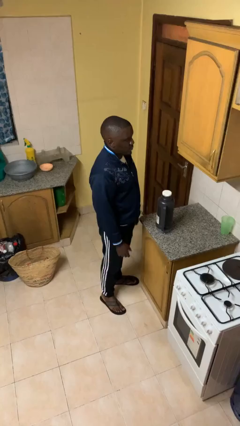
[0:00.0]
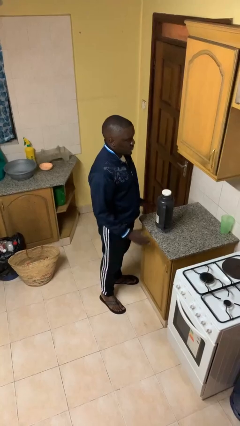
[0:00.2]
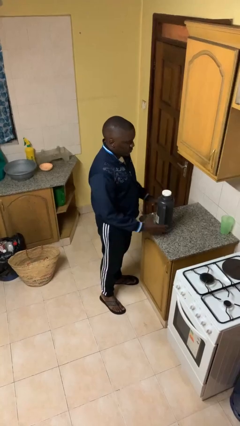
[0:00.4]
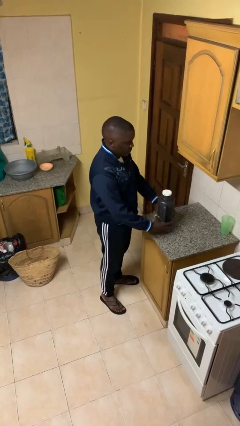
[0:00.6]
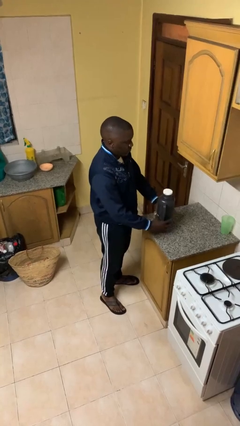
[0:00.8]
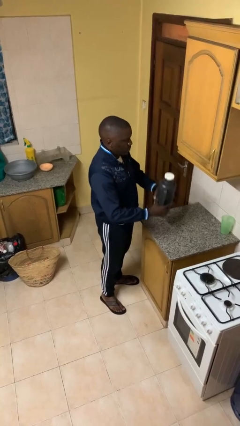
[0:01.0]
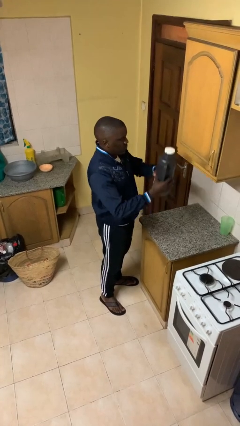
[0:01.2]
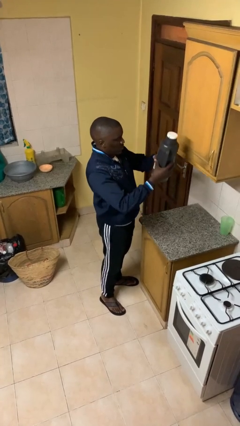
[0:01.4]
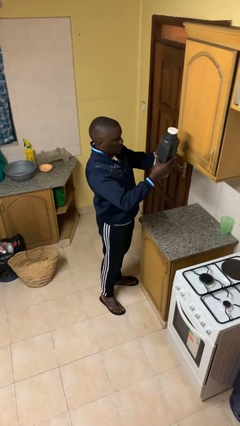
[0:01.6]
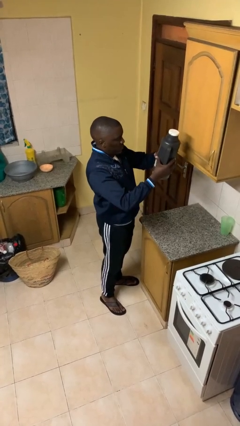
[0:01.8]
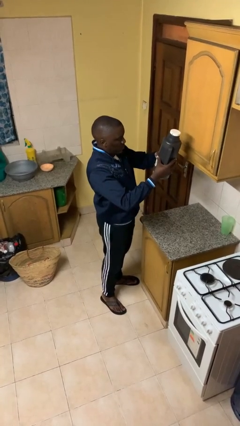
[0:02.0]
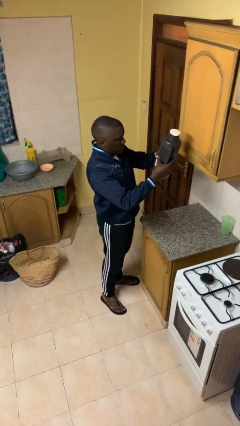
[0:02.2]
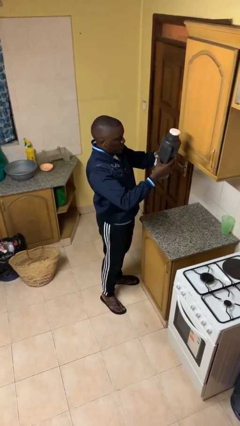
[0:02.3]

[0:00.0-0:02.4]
person picks up object from countertop

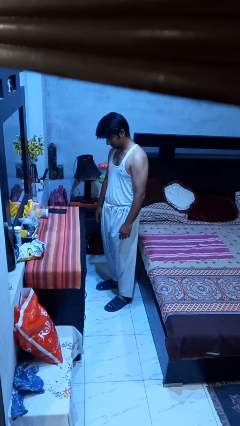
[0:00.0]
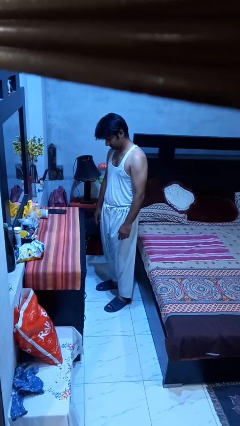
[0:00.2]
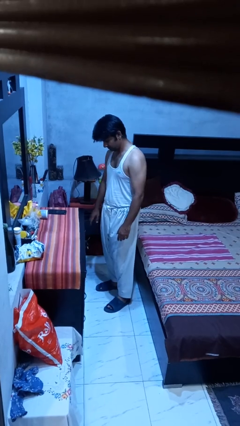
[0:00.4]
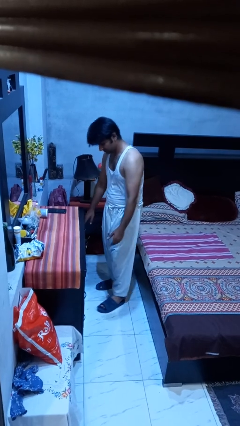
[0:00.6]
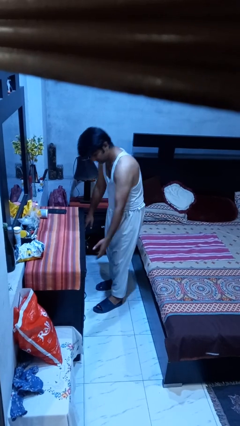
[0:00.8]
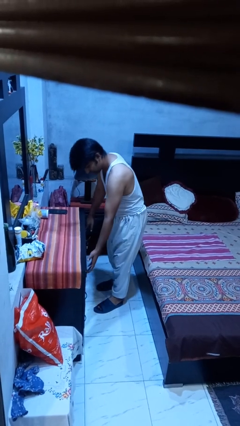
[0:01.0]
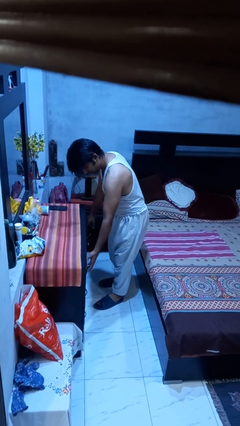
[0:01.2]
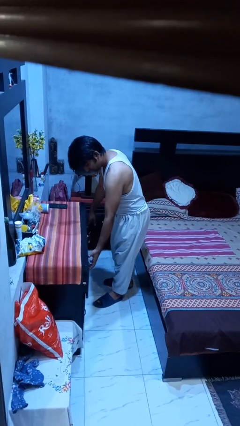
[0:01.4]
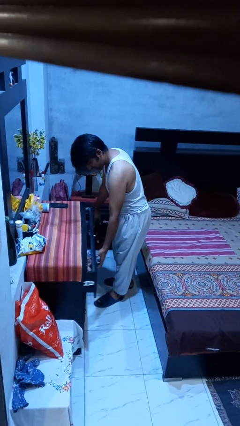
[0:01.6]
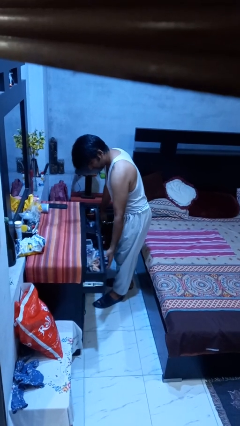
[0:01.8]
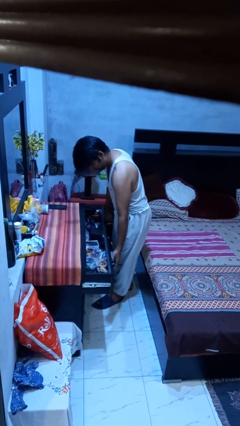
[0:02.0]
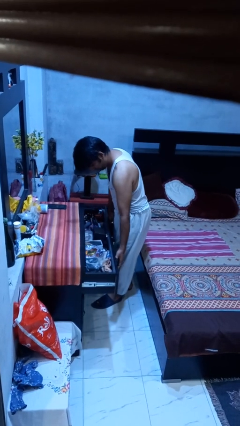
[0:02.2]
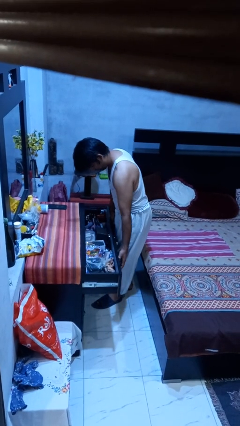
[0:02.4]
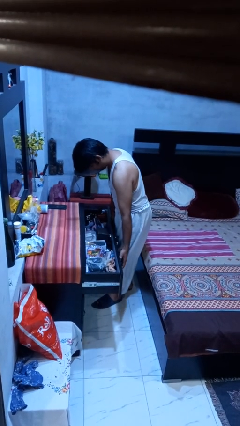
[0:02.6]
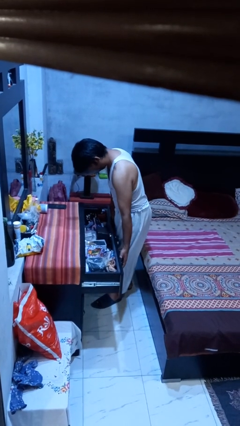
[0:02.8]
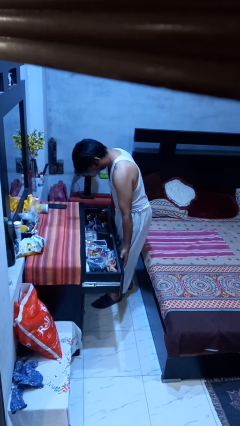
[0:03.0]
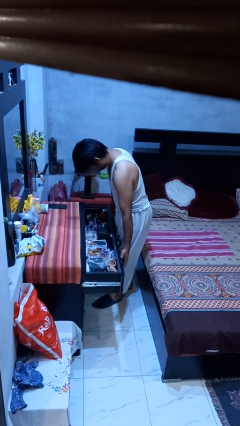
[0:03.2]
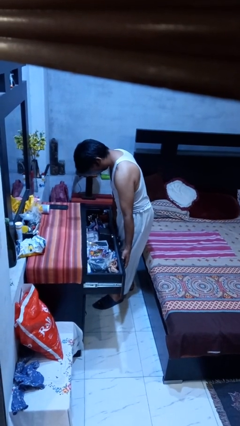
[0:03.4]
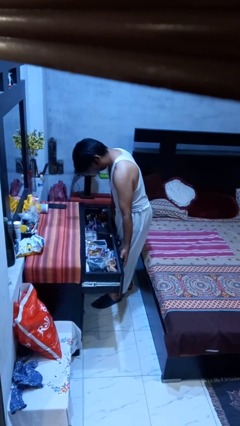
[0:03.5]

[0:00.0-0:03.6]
person opens dresser drawer

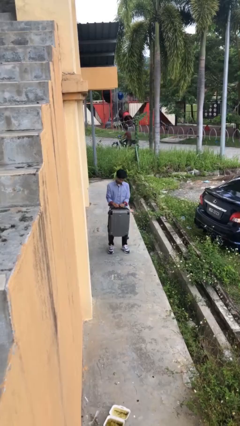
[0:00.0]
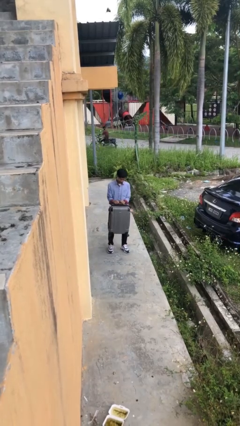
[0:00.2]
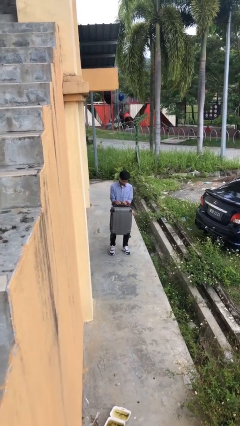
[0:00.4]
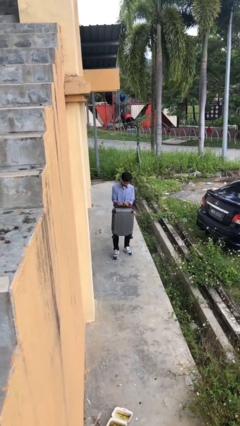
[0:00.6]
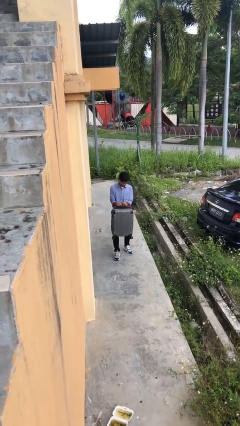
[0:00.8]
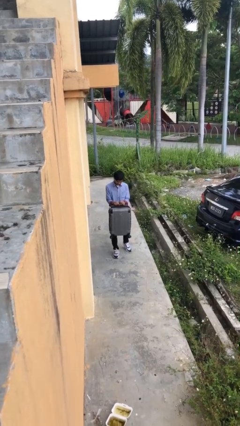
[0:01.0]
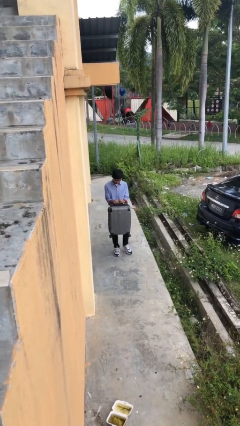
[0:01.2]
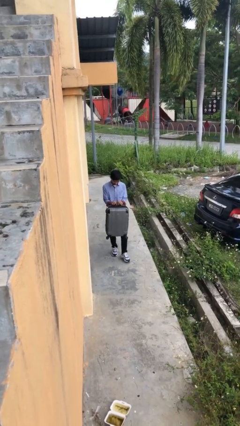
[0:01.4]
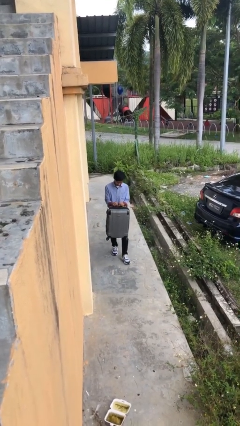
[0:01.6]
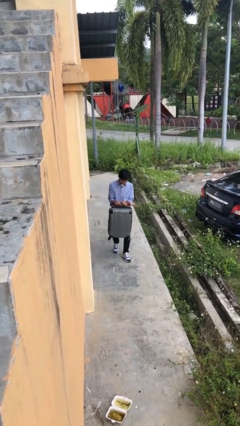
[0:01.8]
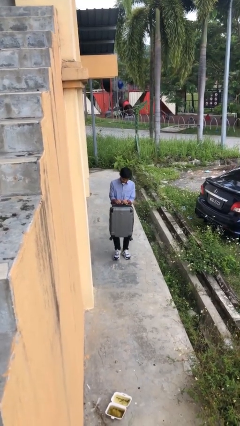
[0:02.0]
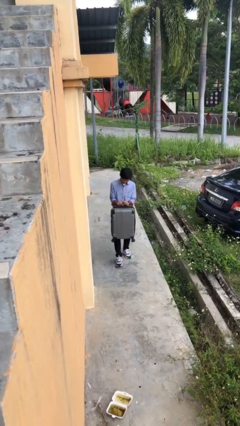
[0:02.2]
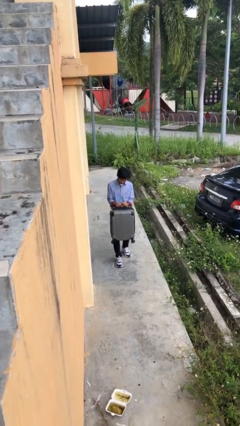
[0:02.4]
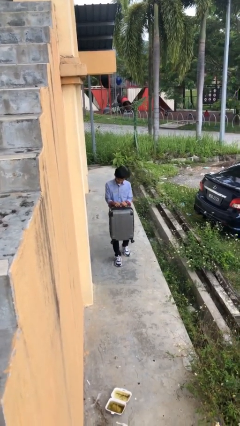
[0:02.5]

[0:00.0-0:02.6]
person carries heavy object

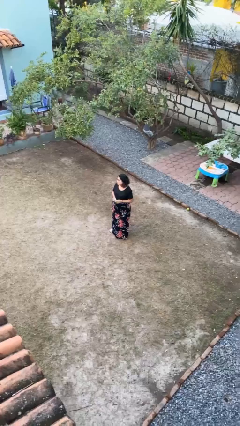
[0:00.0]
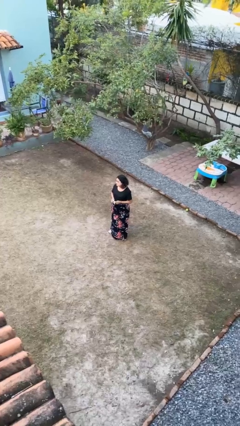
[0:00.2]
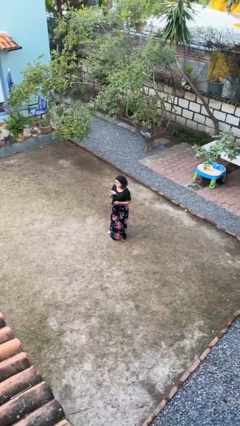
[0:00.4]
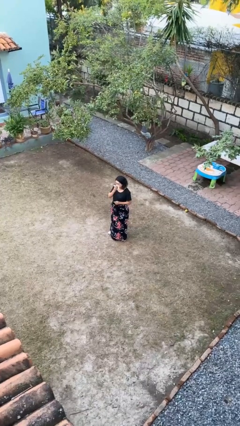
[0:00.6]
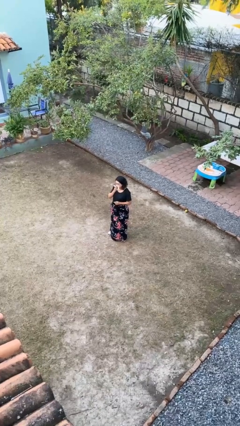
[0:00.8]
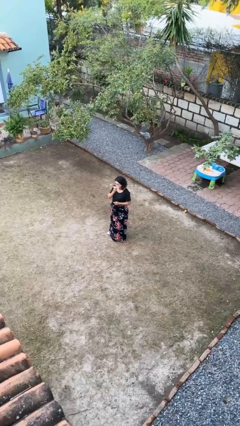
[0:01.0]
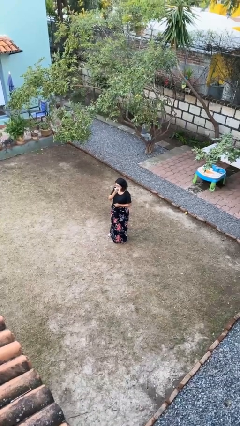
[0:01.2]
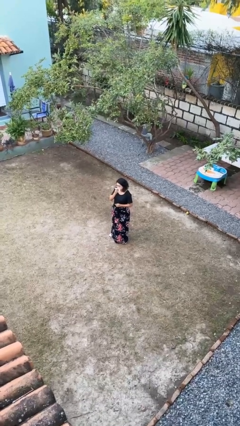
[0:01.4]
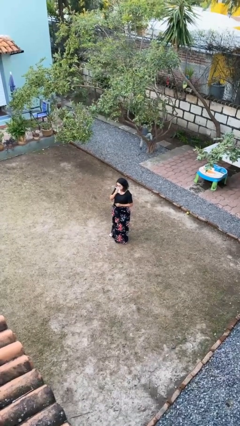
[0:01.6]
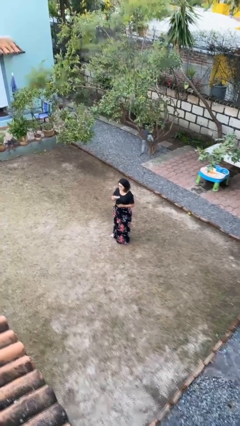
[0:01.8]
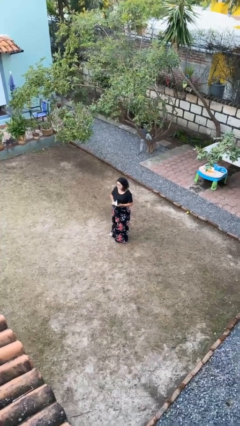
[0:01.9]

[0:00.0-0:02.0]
person wipes mouth with napkin

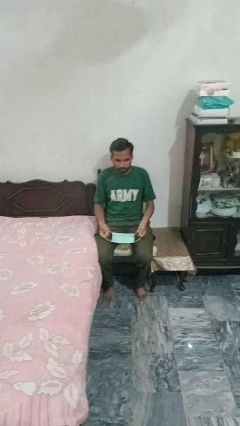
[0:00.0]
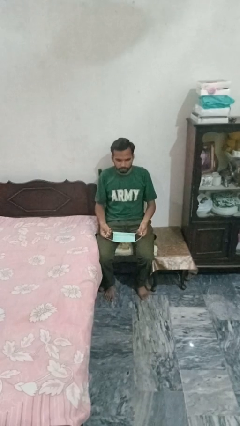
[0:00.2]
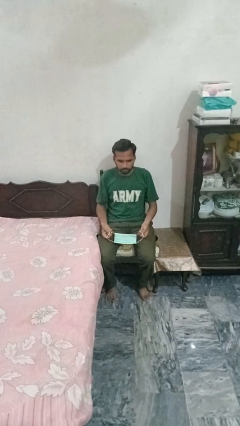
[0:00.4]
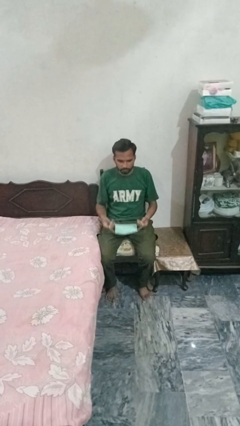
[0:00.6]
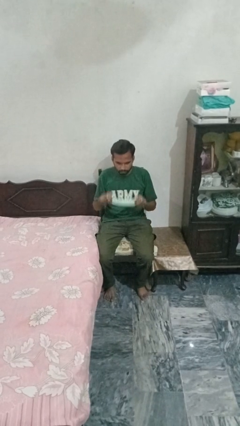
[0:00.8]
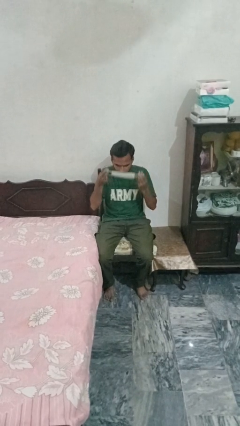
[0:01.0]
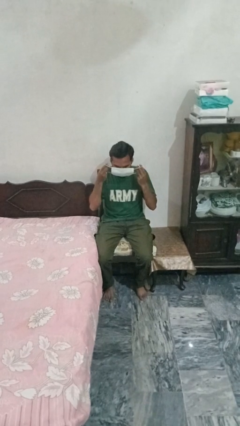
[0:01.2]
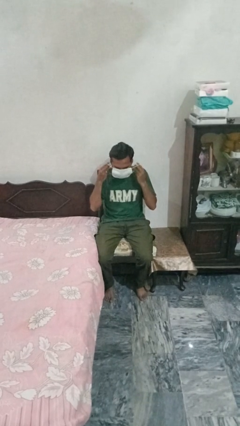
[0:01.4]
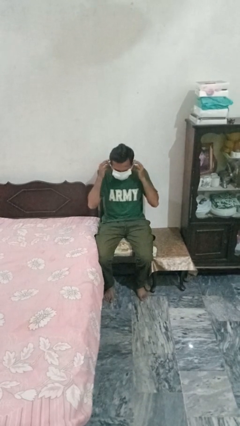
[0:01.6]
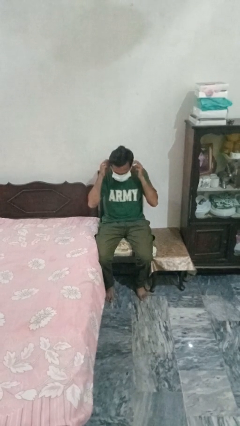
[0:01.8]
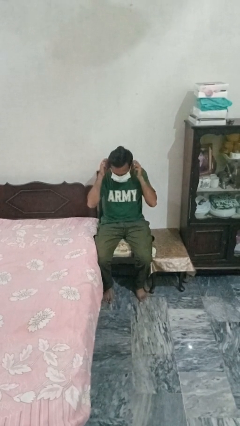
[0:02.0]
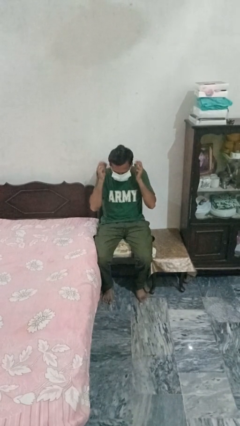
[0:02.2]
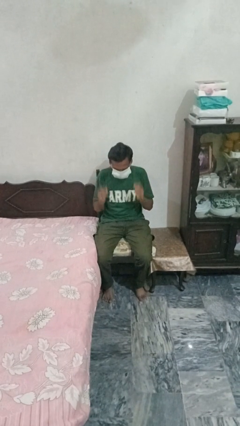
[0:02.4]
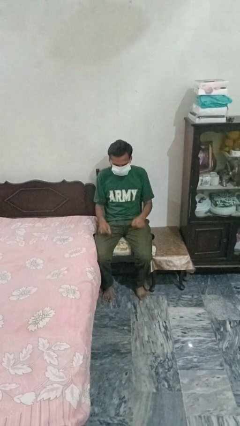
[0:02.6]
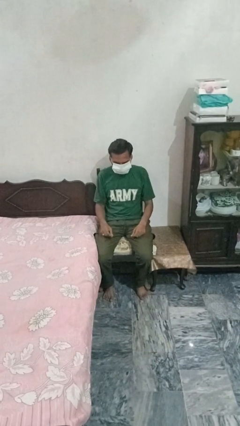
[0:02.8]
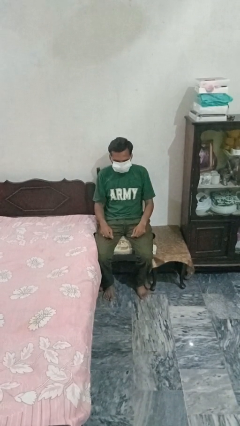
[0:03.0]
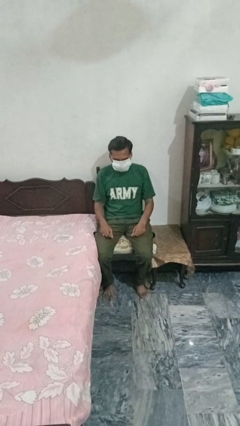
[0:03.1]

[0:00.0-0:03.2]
person puts on facemask

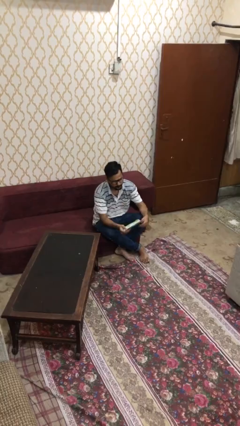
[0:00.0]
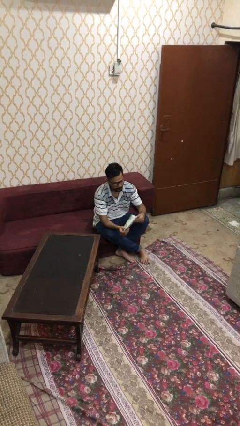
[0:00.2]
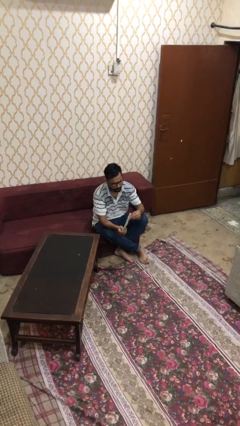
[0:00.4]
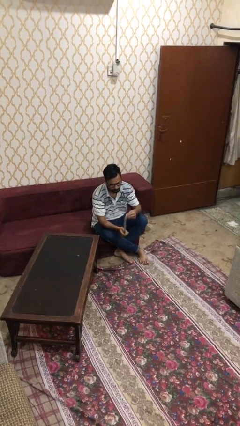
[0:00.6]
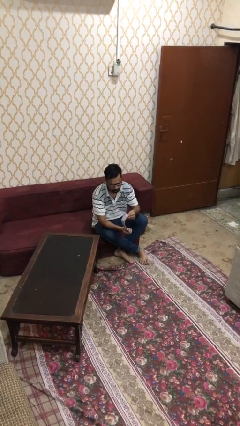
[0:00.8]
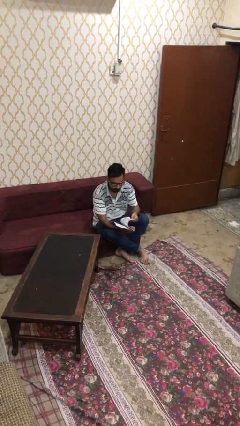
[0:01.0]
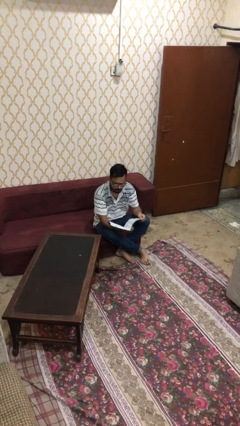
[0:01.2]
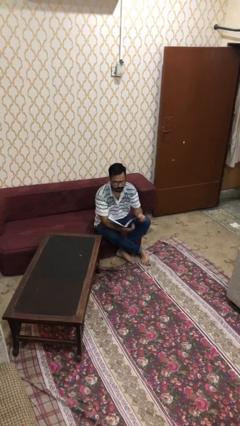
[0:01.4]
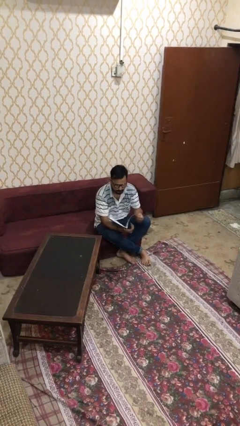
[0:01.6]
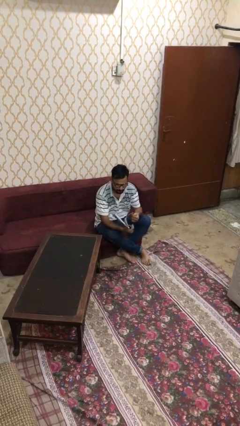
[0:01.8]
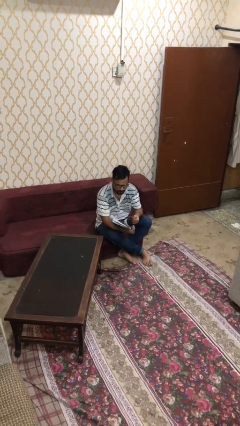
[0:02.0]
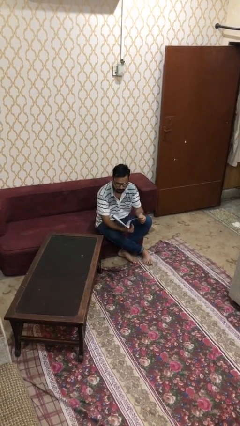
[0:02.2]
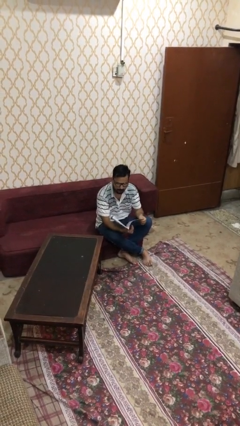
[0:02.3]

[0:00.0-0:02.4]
person reads document

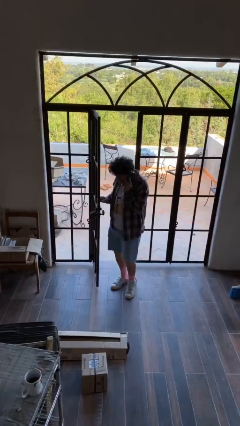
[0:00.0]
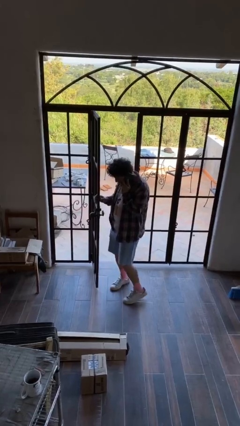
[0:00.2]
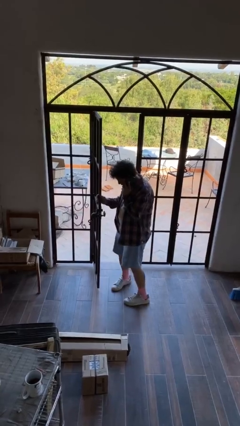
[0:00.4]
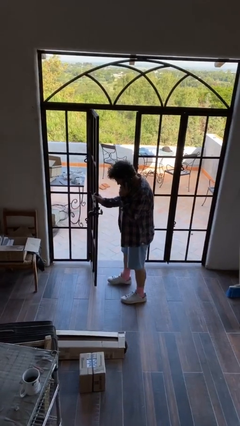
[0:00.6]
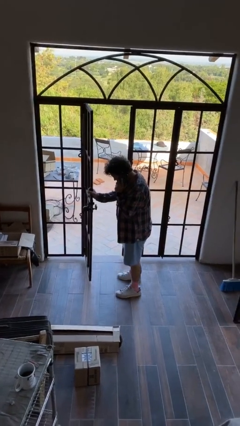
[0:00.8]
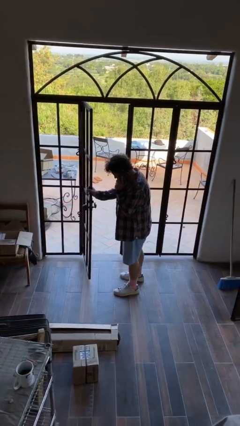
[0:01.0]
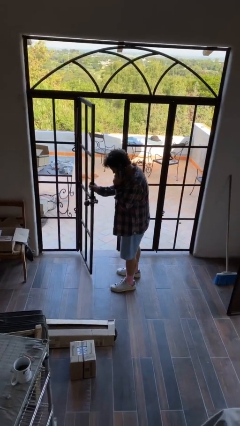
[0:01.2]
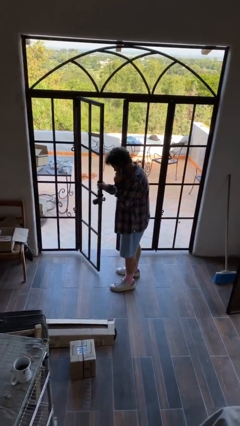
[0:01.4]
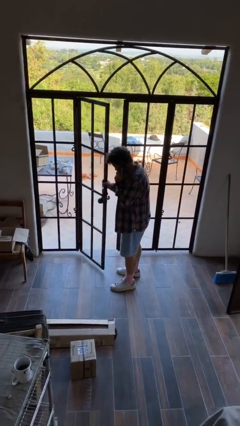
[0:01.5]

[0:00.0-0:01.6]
person enters scene through structure
